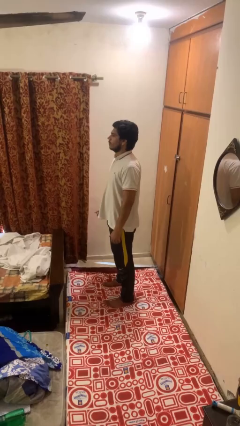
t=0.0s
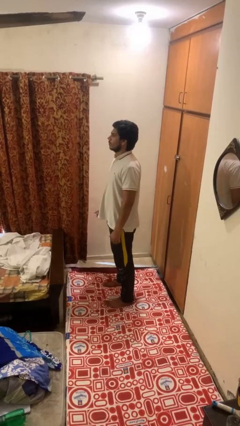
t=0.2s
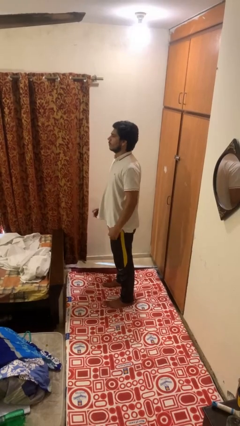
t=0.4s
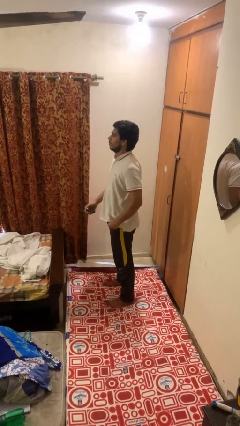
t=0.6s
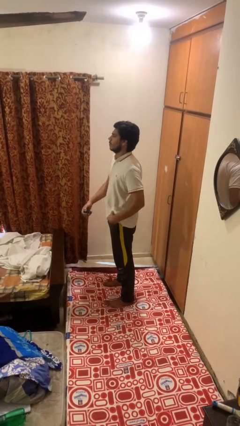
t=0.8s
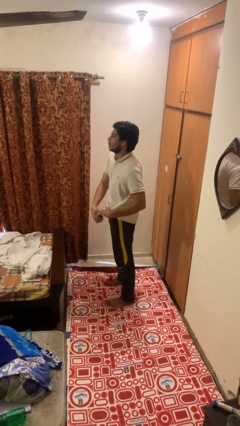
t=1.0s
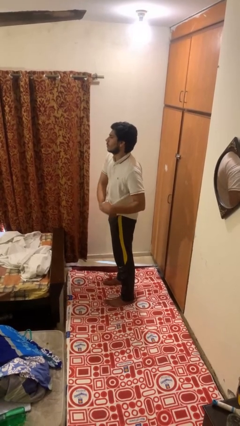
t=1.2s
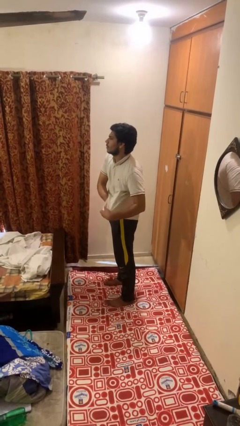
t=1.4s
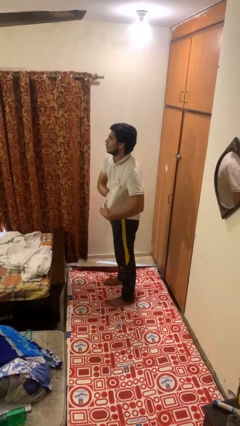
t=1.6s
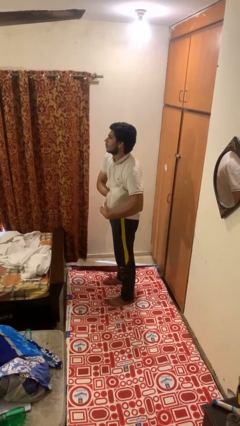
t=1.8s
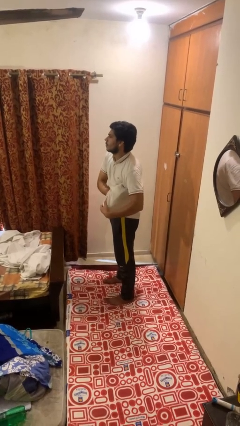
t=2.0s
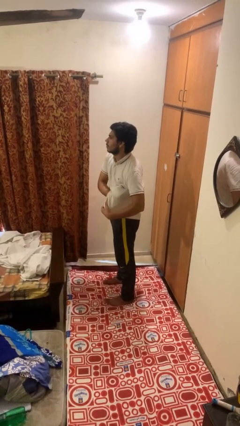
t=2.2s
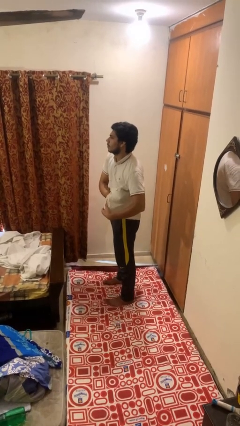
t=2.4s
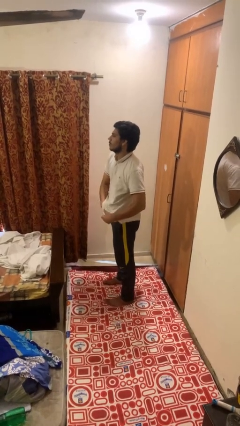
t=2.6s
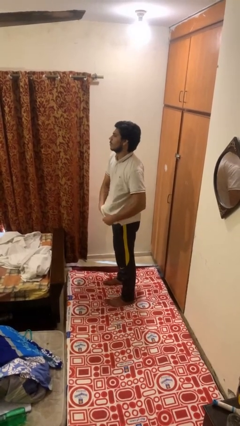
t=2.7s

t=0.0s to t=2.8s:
person applies deodorant

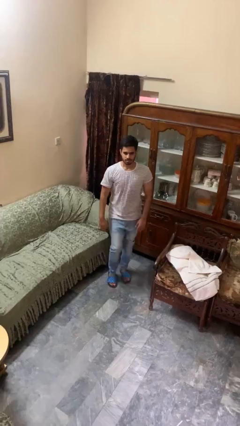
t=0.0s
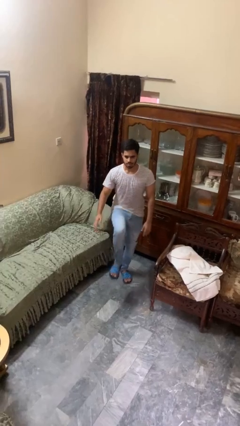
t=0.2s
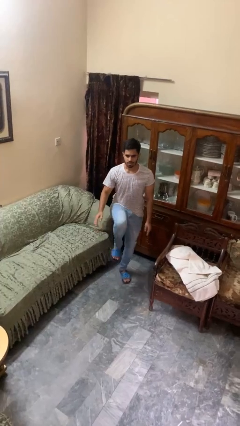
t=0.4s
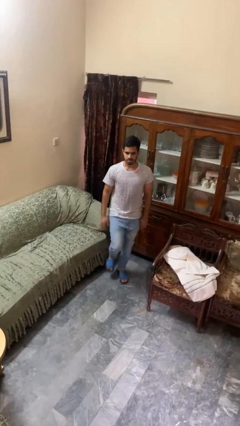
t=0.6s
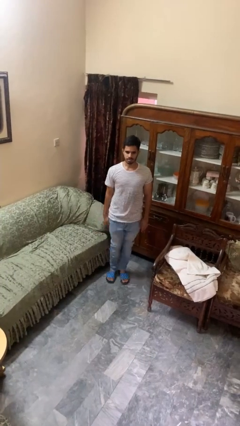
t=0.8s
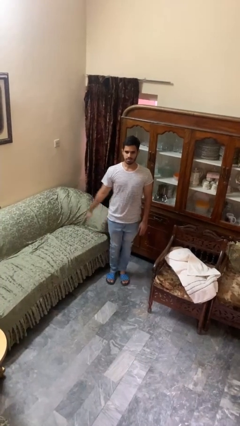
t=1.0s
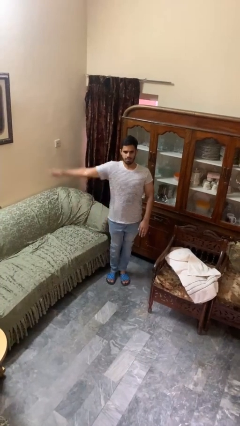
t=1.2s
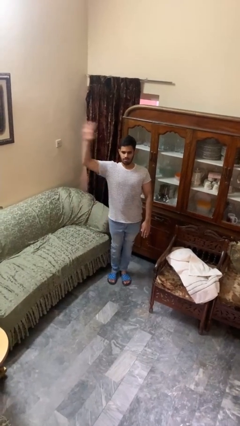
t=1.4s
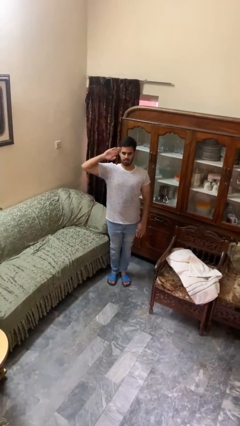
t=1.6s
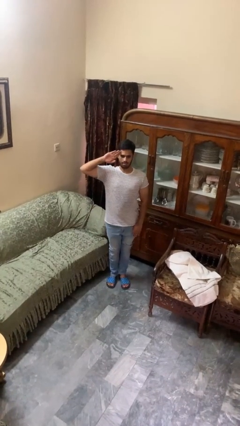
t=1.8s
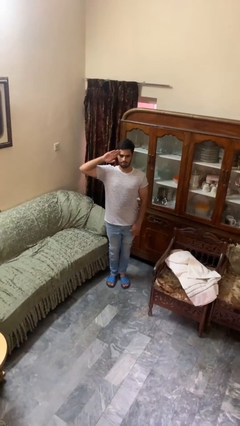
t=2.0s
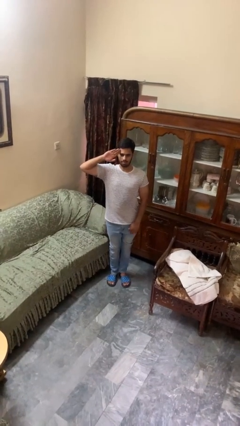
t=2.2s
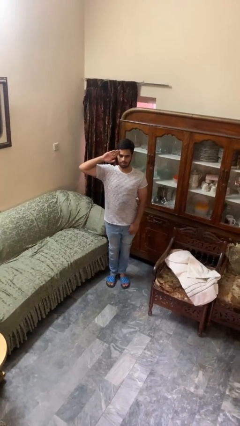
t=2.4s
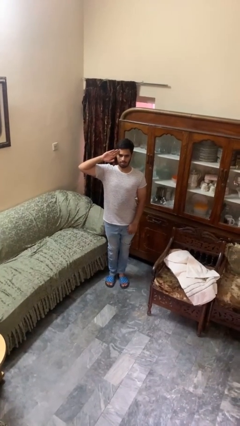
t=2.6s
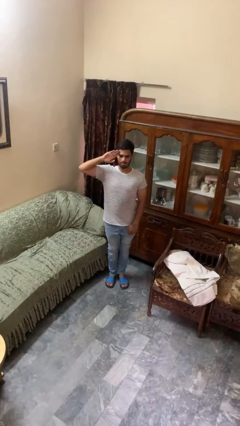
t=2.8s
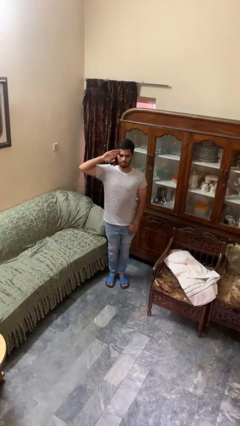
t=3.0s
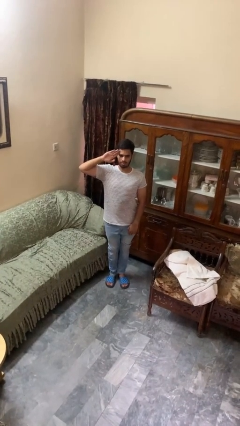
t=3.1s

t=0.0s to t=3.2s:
person salutes

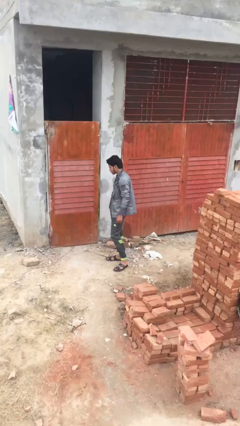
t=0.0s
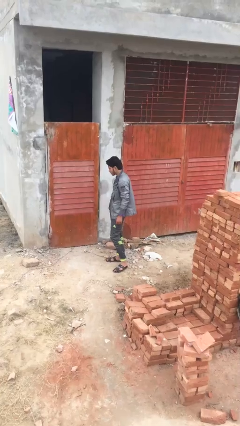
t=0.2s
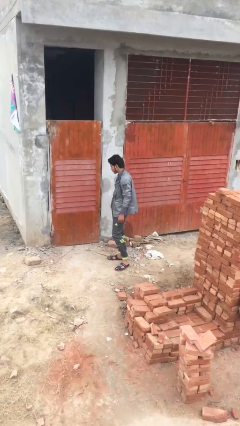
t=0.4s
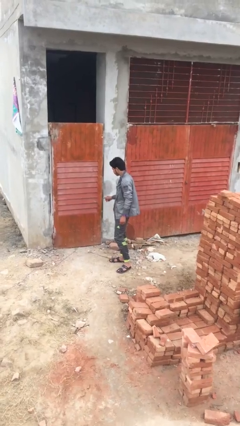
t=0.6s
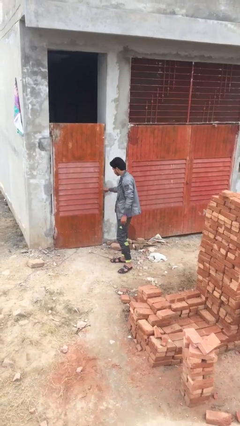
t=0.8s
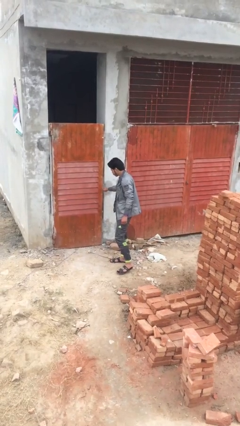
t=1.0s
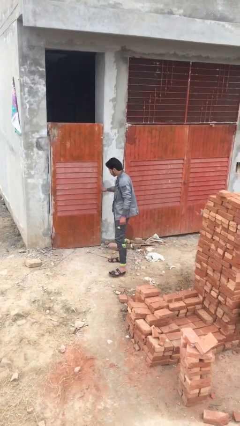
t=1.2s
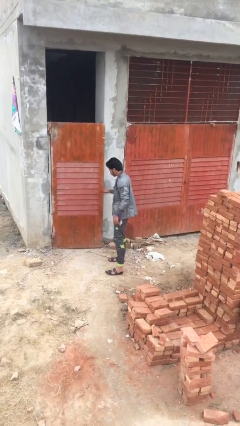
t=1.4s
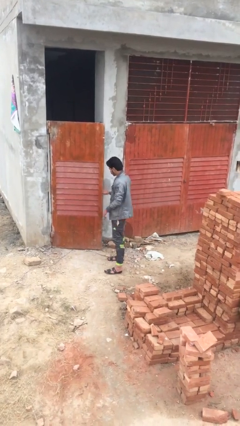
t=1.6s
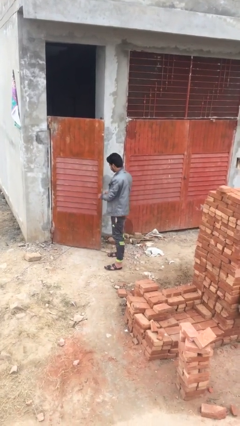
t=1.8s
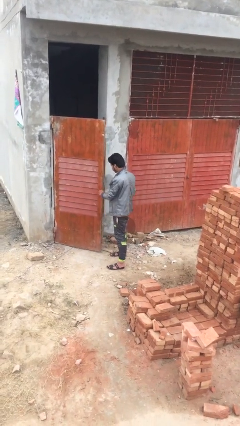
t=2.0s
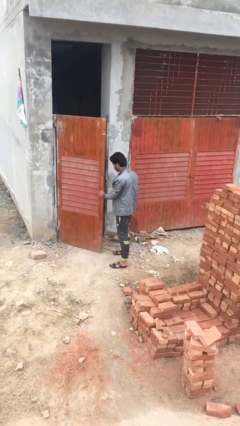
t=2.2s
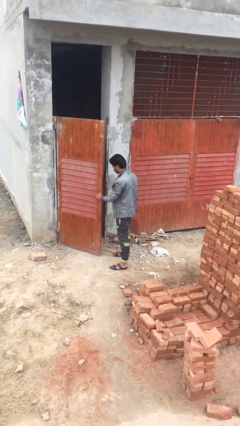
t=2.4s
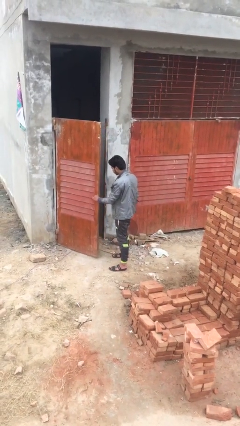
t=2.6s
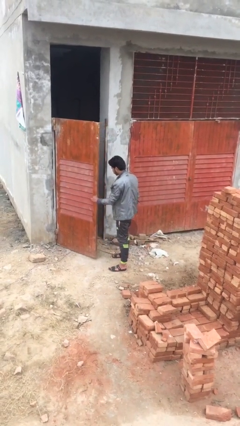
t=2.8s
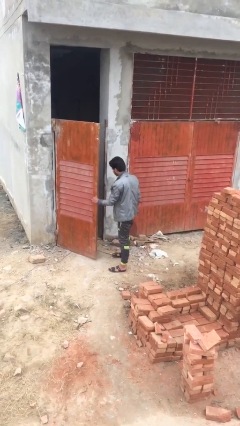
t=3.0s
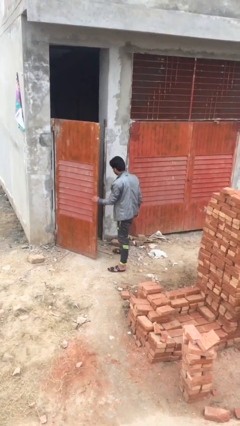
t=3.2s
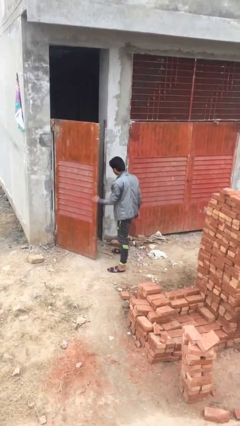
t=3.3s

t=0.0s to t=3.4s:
person opens facility door

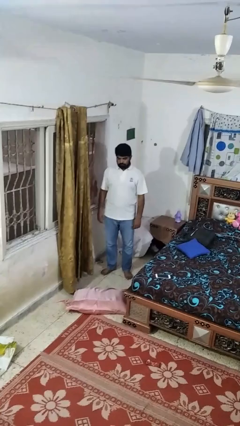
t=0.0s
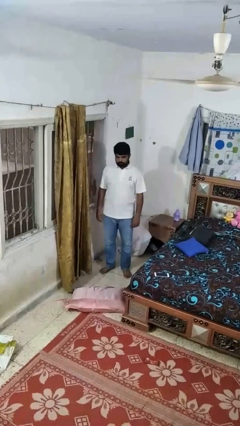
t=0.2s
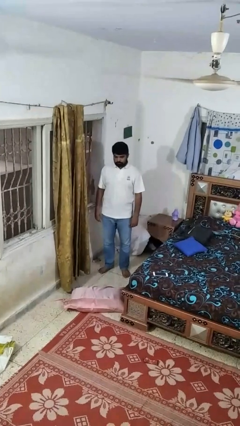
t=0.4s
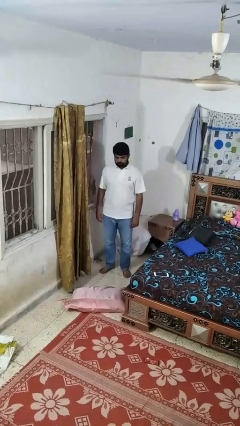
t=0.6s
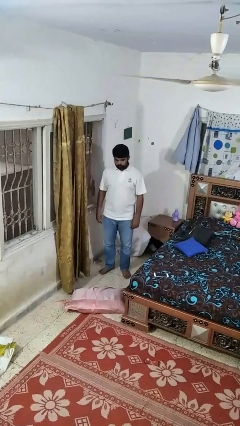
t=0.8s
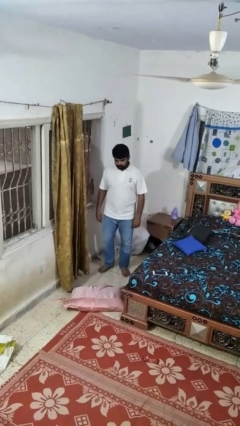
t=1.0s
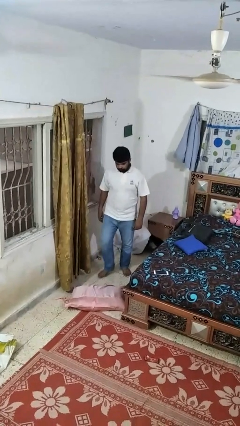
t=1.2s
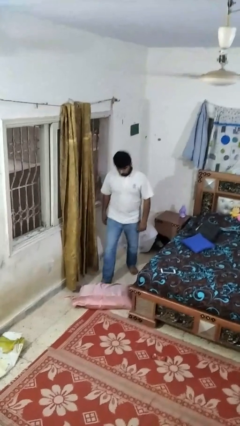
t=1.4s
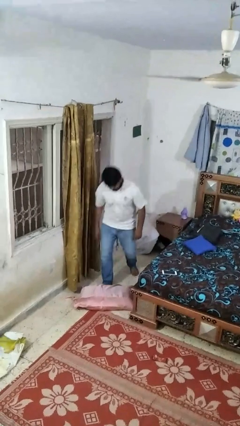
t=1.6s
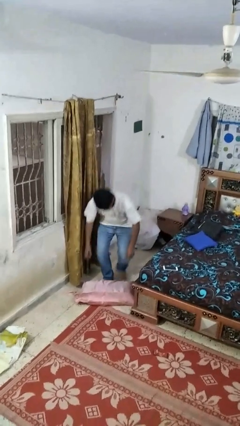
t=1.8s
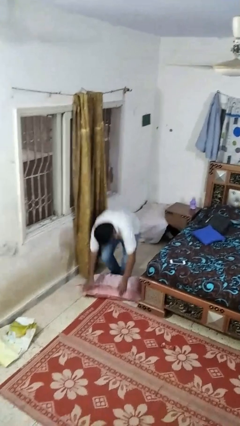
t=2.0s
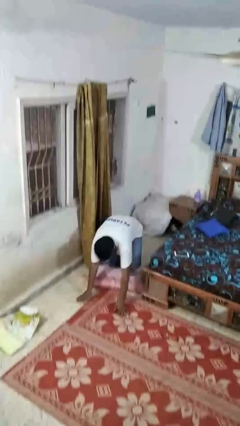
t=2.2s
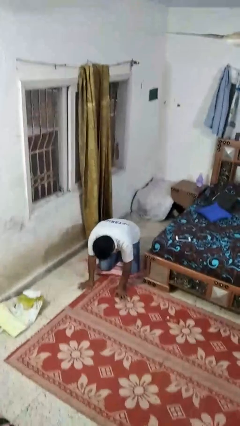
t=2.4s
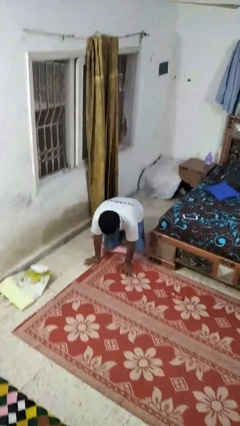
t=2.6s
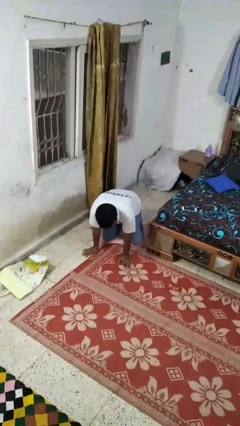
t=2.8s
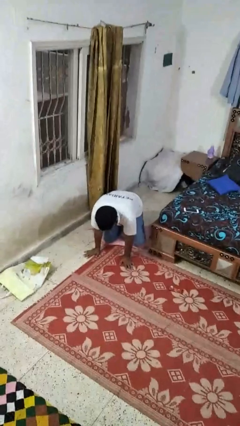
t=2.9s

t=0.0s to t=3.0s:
person trips on object on floor

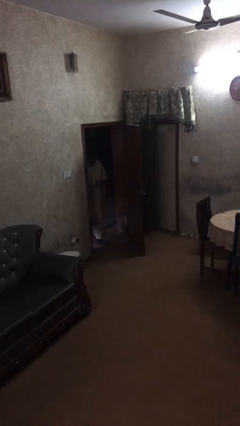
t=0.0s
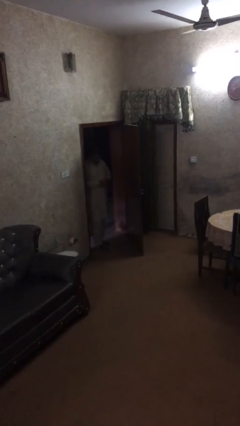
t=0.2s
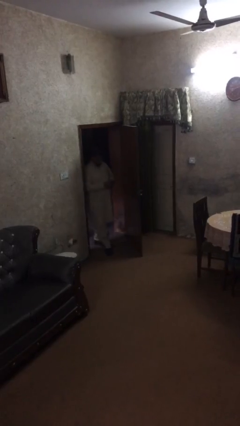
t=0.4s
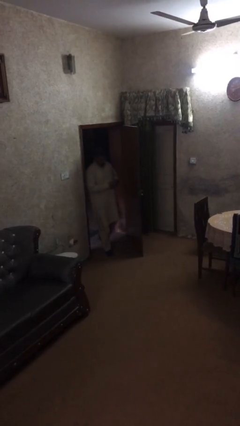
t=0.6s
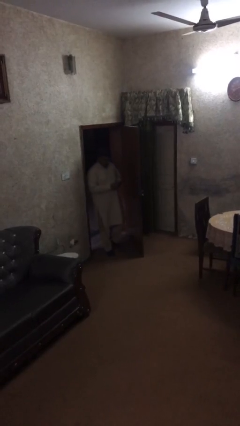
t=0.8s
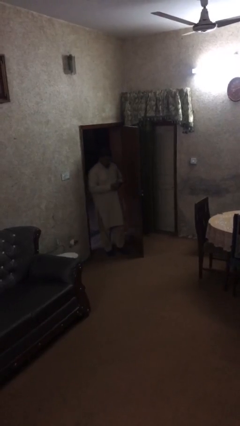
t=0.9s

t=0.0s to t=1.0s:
person enters scene through structure

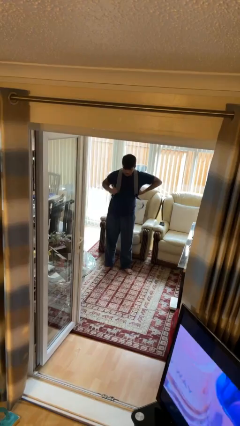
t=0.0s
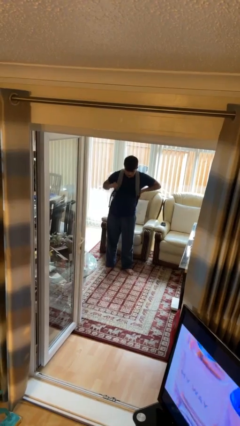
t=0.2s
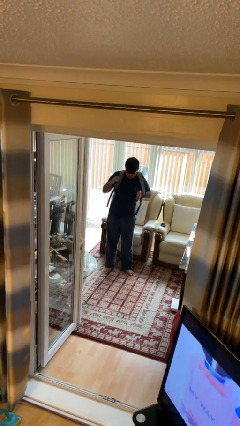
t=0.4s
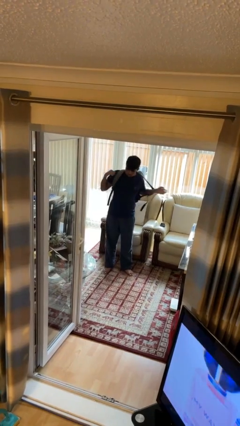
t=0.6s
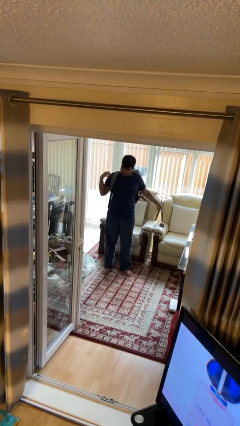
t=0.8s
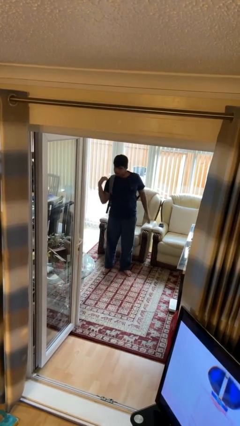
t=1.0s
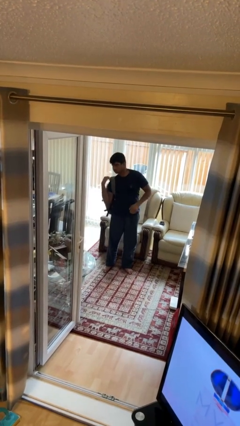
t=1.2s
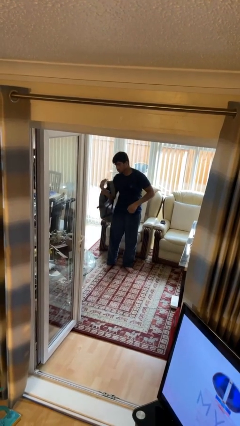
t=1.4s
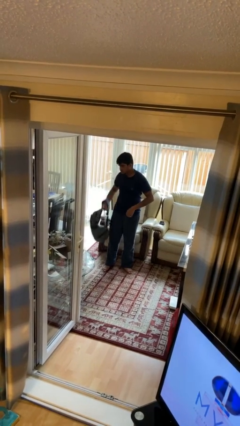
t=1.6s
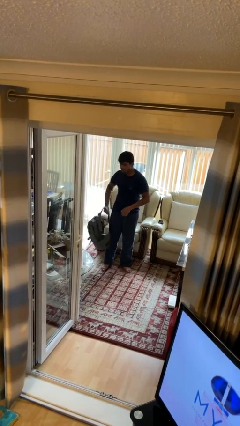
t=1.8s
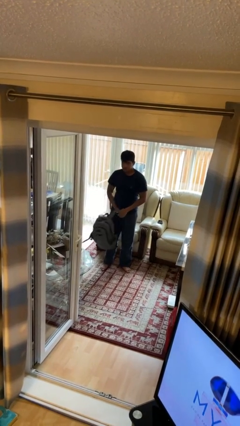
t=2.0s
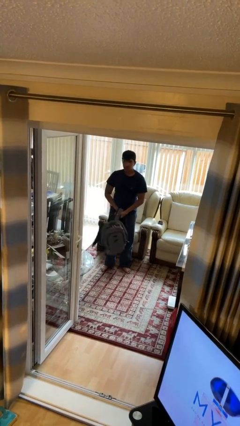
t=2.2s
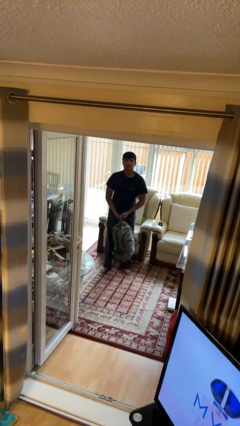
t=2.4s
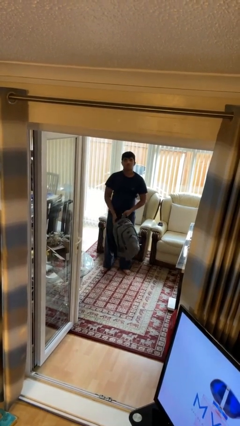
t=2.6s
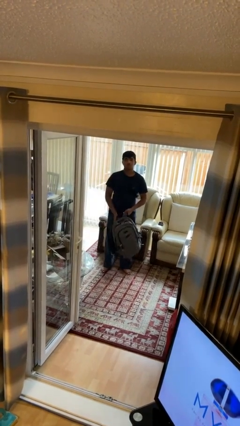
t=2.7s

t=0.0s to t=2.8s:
person takes off backpack

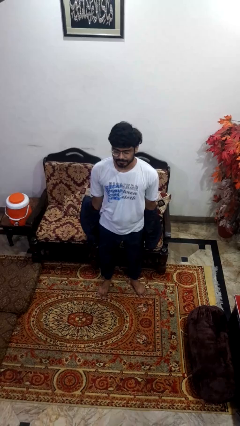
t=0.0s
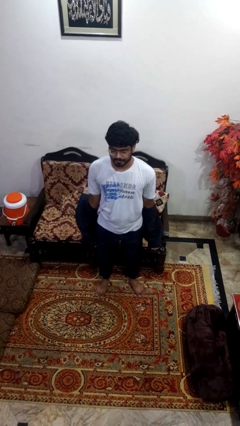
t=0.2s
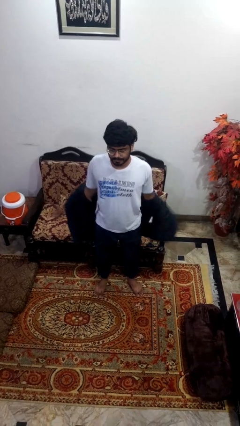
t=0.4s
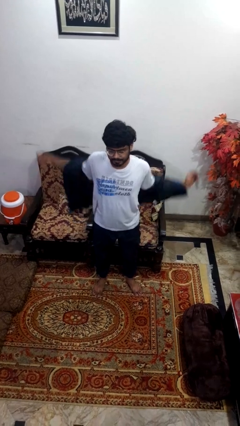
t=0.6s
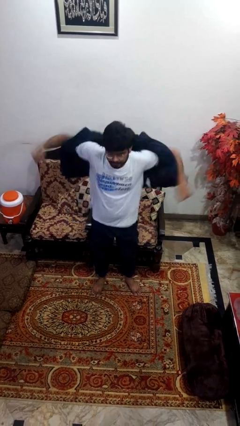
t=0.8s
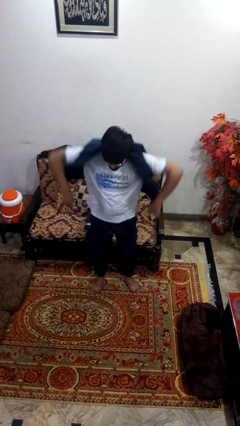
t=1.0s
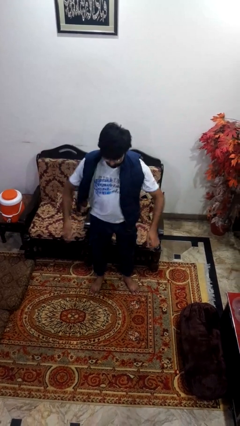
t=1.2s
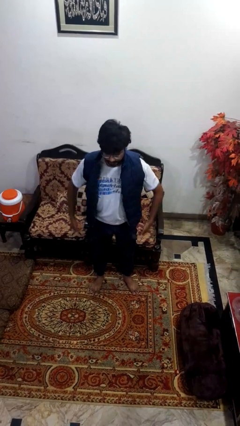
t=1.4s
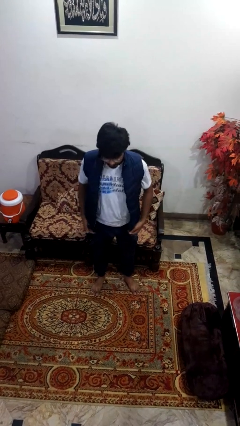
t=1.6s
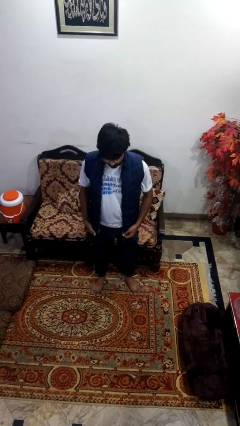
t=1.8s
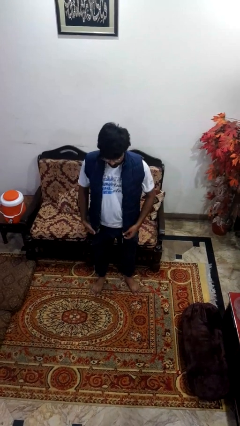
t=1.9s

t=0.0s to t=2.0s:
person puts on jacket
